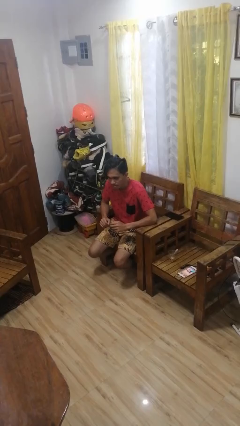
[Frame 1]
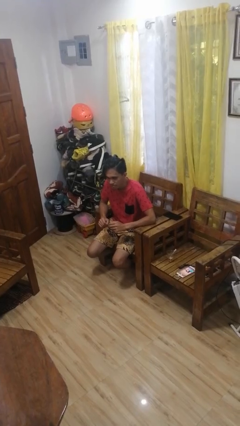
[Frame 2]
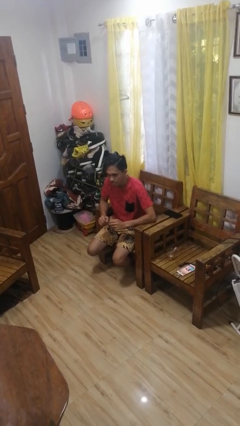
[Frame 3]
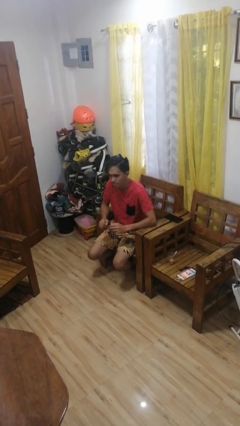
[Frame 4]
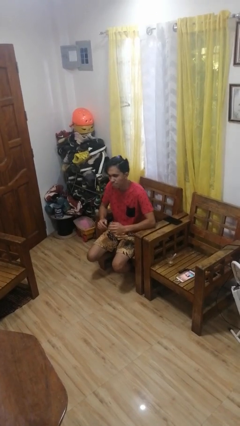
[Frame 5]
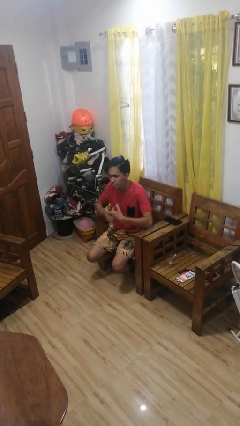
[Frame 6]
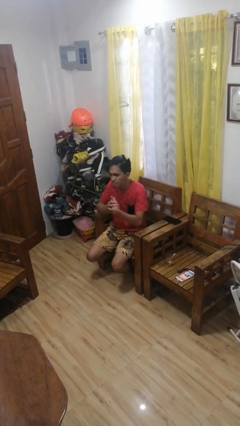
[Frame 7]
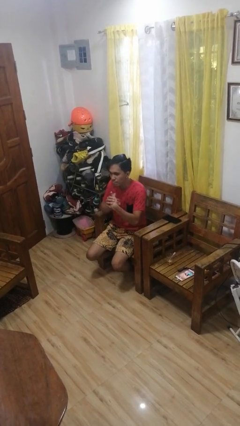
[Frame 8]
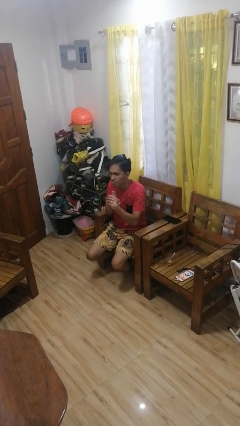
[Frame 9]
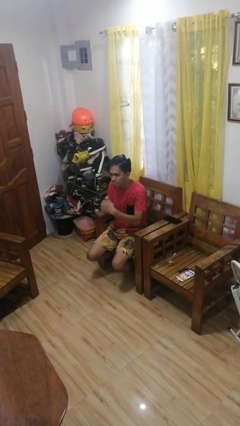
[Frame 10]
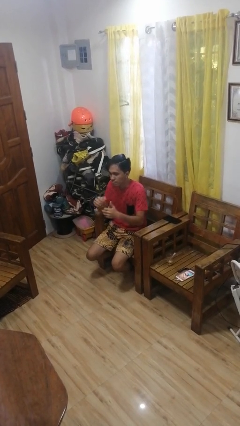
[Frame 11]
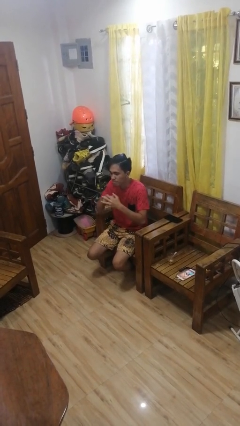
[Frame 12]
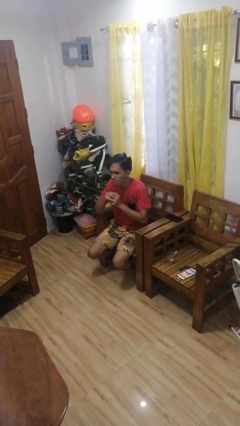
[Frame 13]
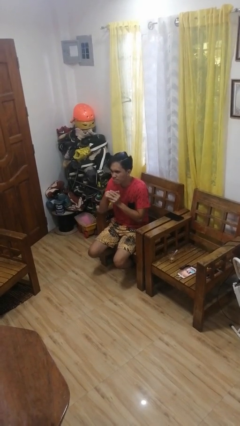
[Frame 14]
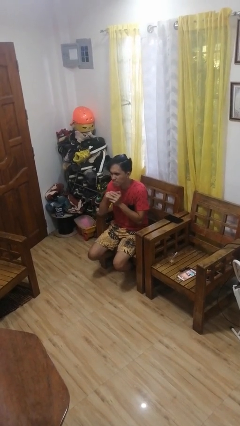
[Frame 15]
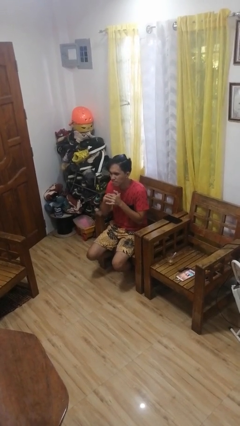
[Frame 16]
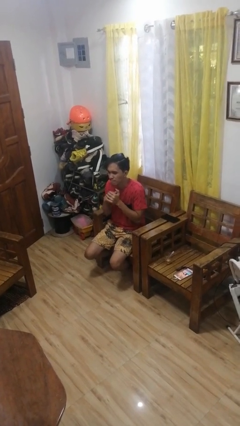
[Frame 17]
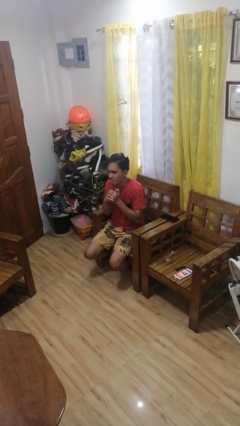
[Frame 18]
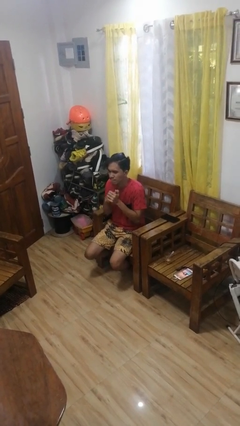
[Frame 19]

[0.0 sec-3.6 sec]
person cracks knuckles

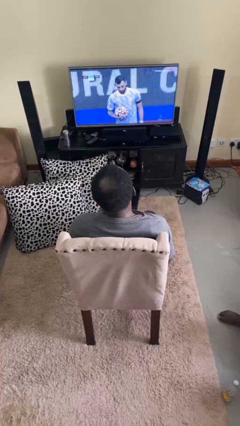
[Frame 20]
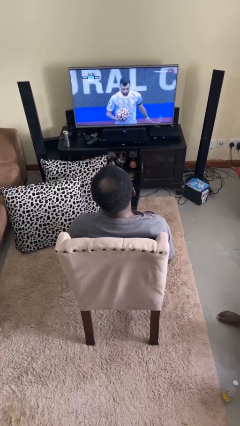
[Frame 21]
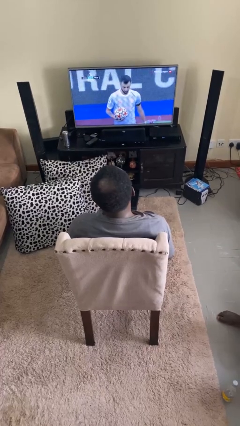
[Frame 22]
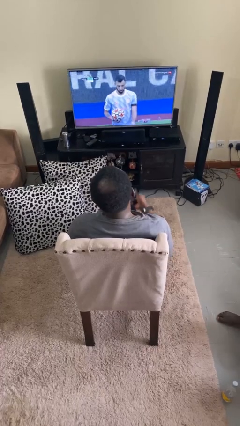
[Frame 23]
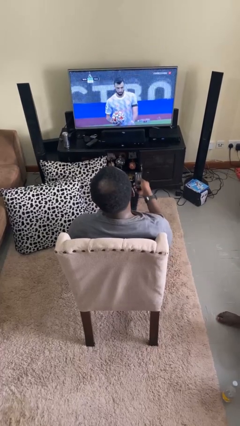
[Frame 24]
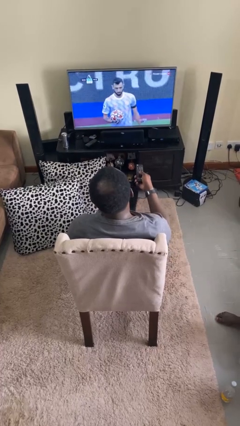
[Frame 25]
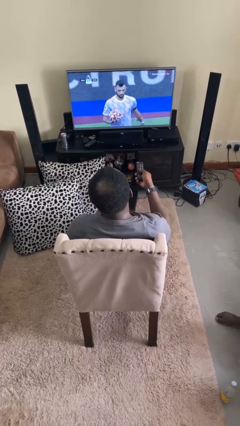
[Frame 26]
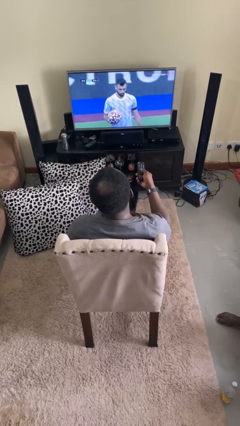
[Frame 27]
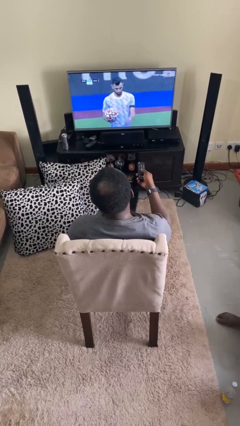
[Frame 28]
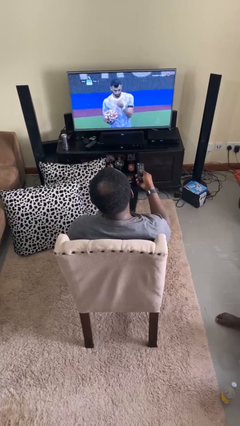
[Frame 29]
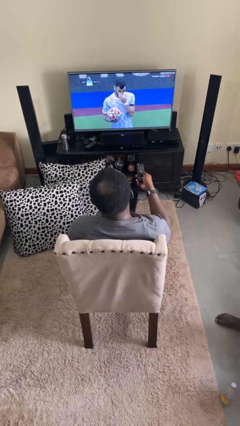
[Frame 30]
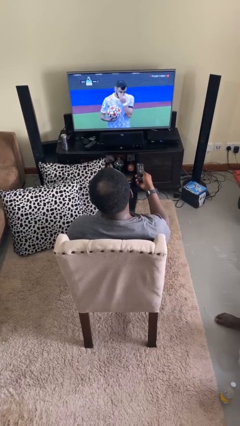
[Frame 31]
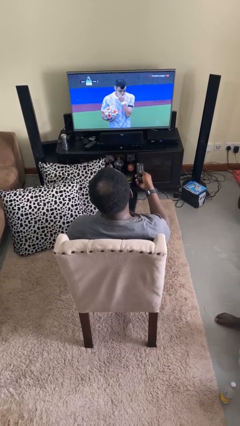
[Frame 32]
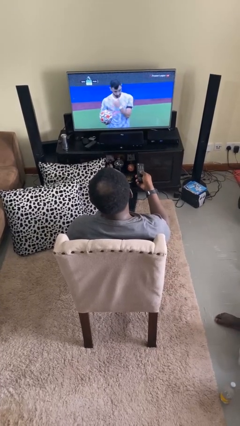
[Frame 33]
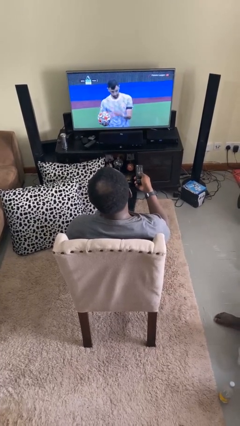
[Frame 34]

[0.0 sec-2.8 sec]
person uses television remote

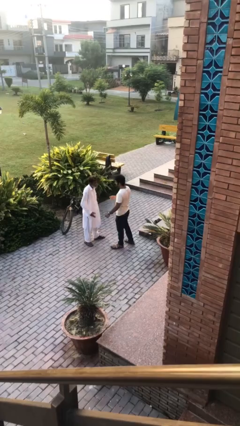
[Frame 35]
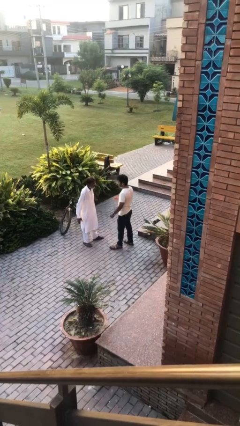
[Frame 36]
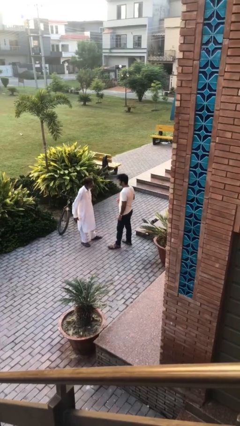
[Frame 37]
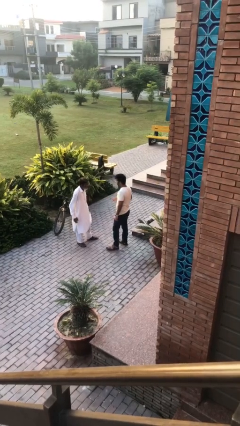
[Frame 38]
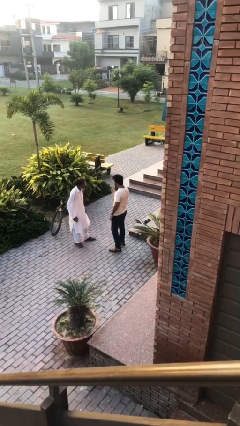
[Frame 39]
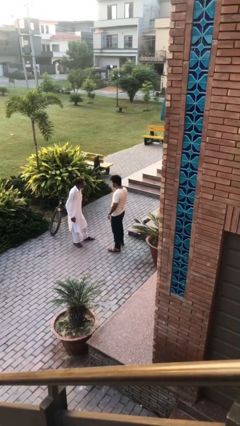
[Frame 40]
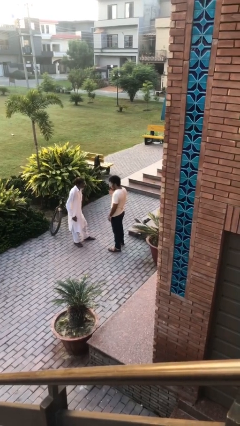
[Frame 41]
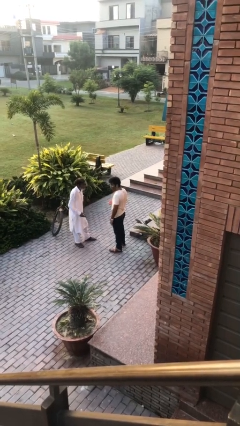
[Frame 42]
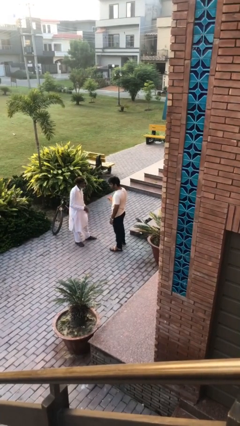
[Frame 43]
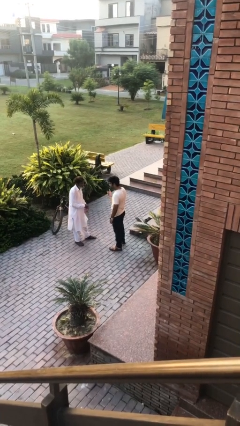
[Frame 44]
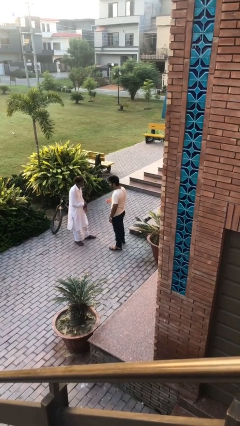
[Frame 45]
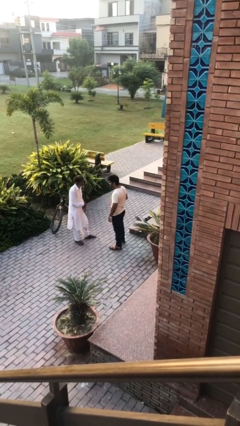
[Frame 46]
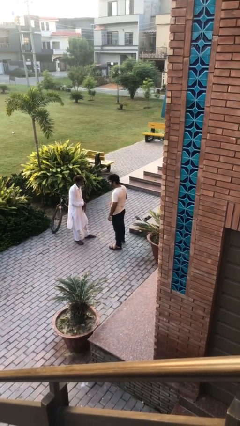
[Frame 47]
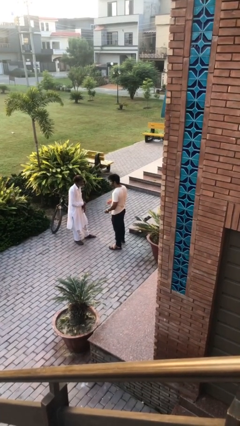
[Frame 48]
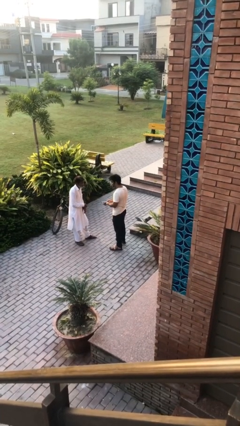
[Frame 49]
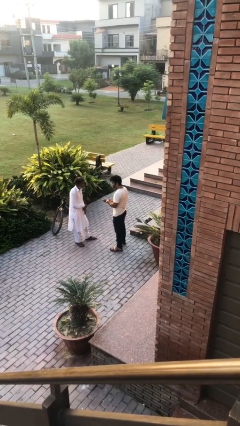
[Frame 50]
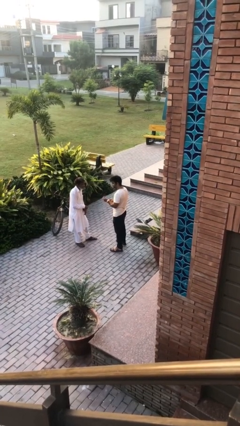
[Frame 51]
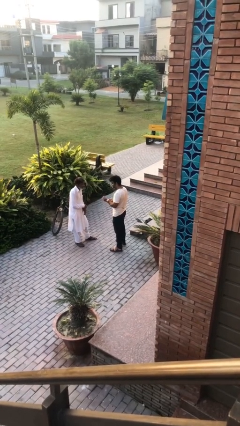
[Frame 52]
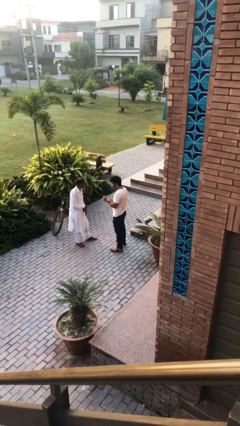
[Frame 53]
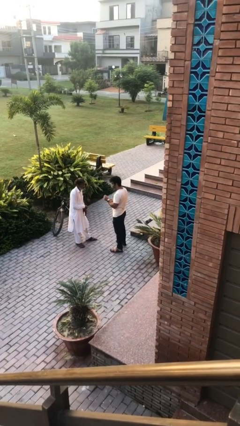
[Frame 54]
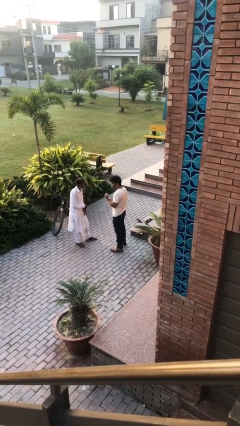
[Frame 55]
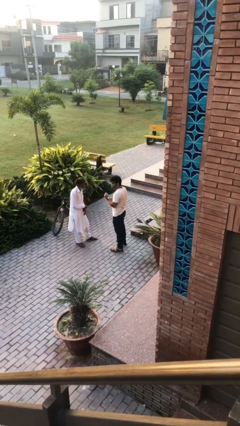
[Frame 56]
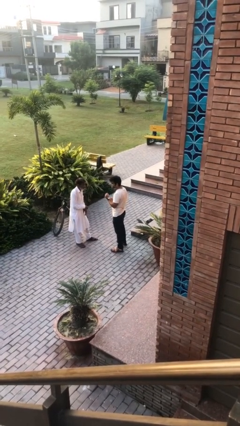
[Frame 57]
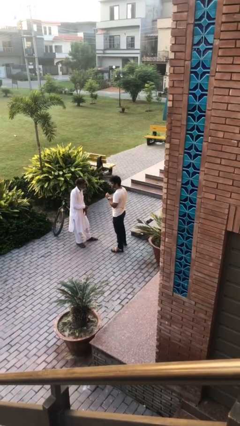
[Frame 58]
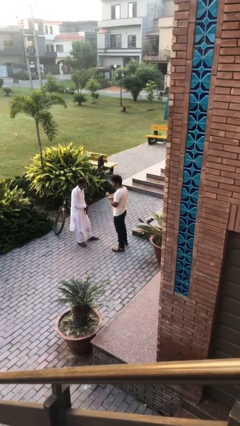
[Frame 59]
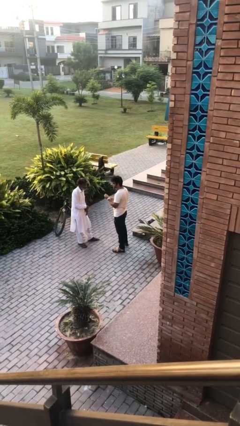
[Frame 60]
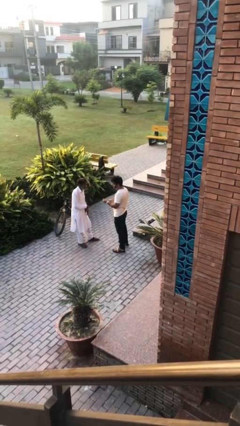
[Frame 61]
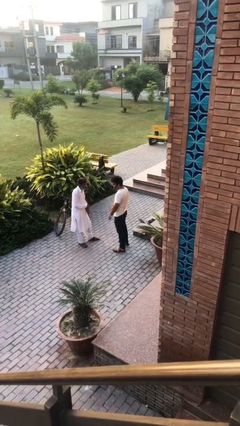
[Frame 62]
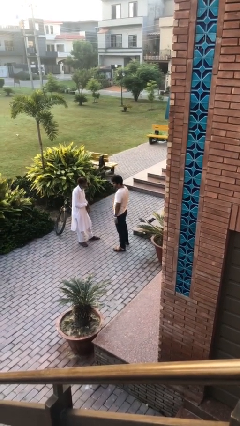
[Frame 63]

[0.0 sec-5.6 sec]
person talks to person

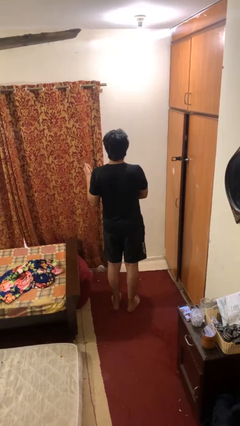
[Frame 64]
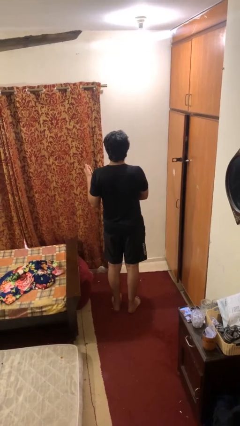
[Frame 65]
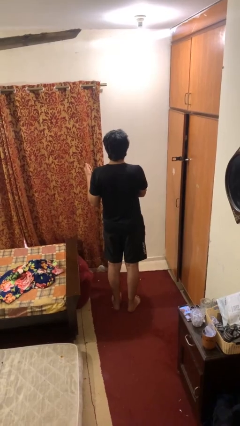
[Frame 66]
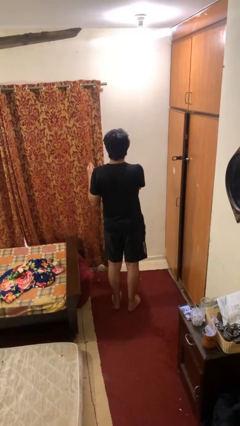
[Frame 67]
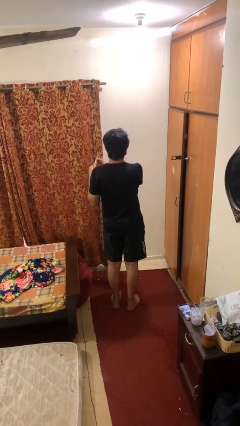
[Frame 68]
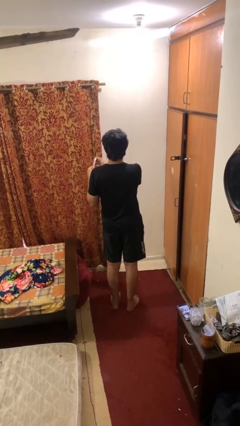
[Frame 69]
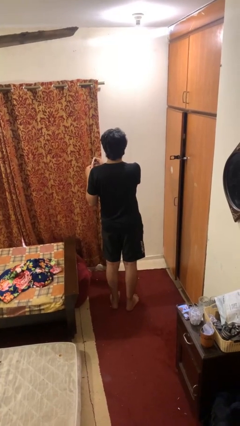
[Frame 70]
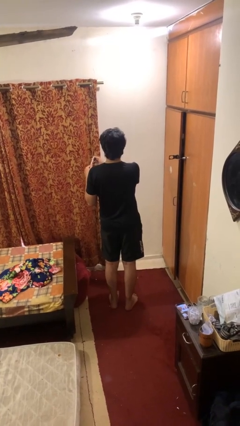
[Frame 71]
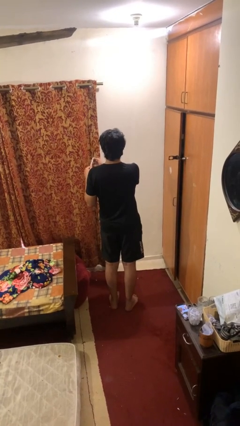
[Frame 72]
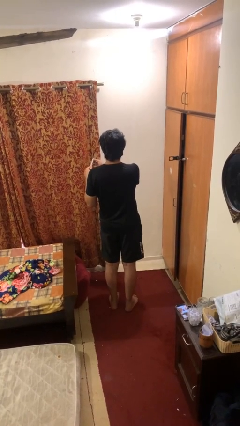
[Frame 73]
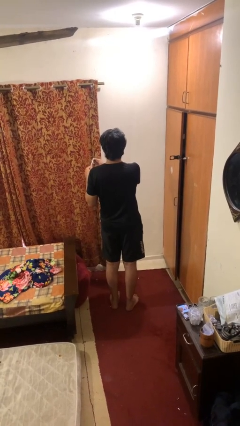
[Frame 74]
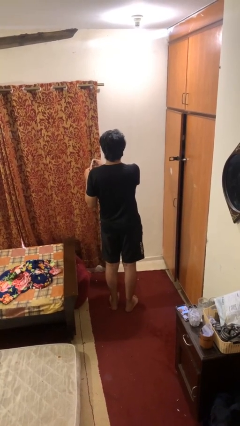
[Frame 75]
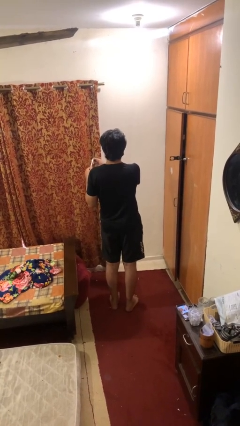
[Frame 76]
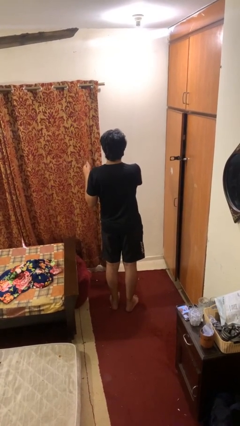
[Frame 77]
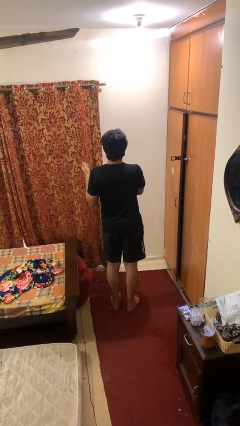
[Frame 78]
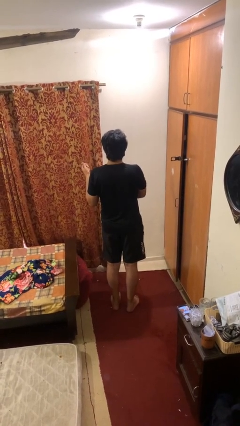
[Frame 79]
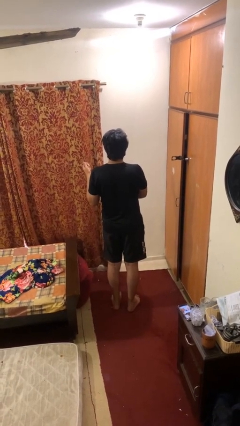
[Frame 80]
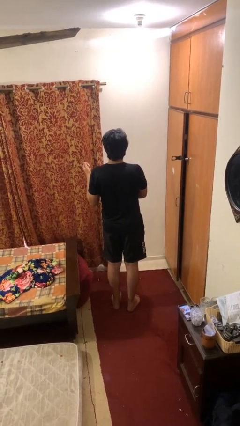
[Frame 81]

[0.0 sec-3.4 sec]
person files fingernails

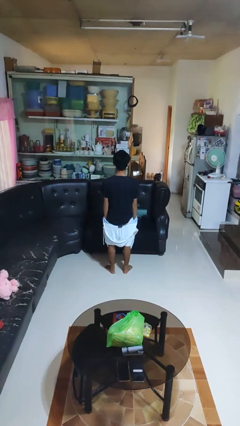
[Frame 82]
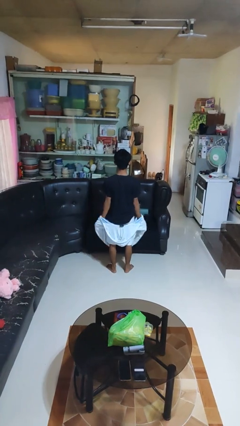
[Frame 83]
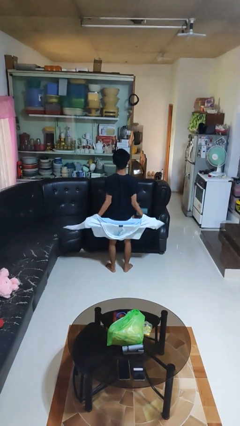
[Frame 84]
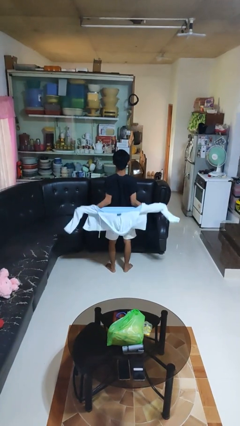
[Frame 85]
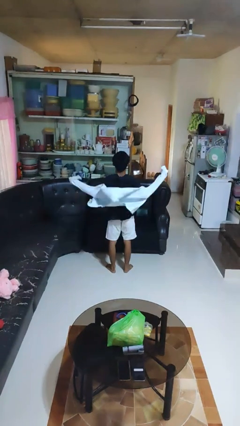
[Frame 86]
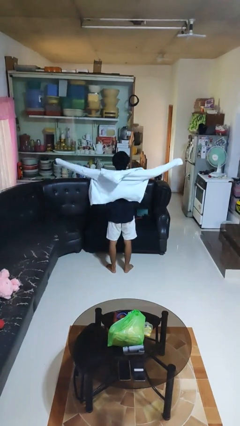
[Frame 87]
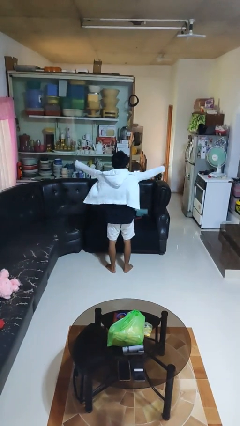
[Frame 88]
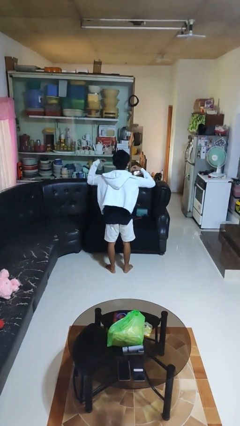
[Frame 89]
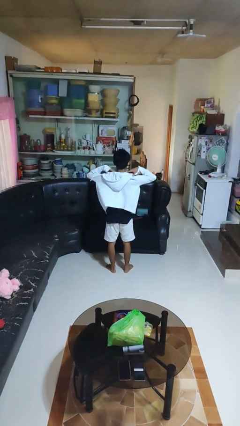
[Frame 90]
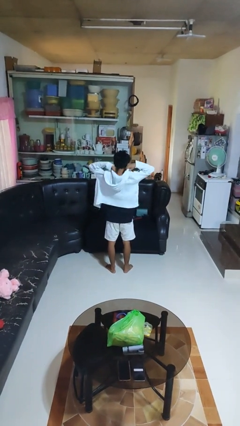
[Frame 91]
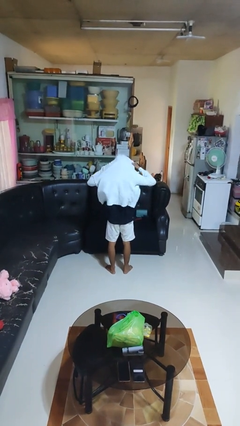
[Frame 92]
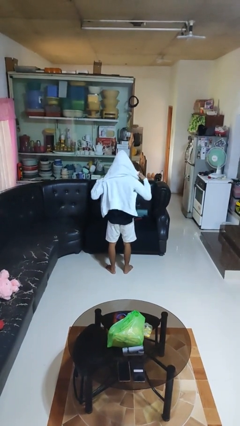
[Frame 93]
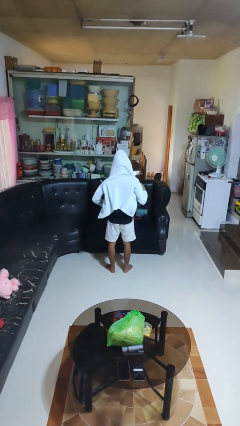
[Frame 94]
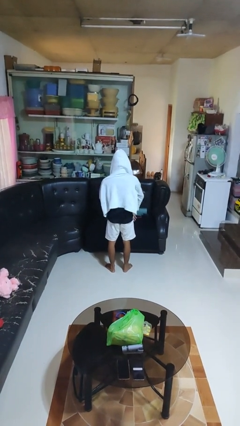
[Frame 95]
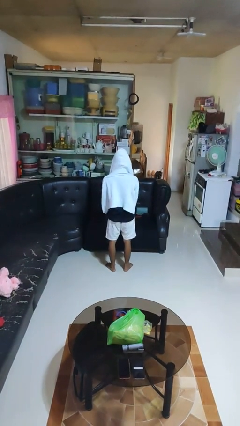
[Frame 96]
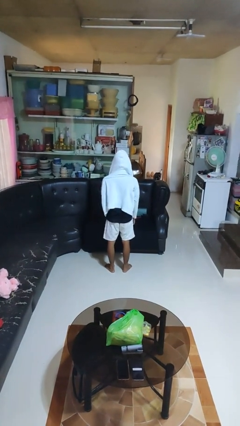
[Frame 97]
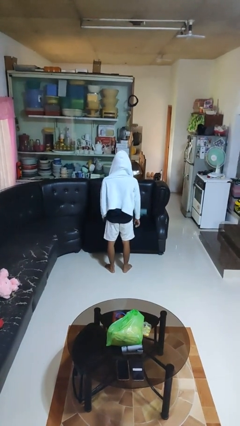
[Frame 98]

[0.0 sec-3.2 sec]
person puts on hoodie
